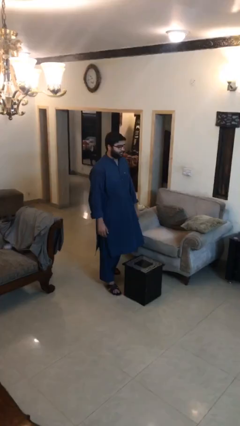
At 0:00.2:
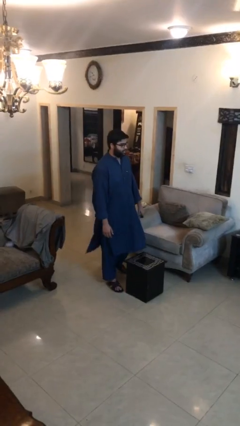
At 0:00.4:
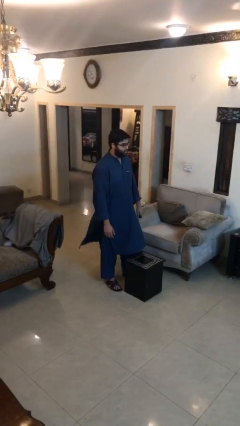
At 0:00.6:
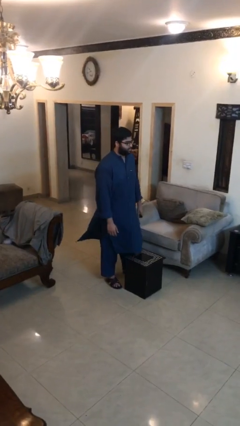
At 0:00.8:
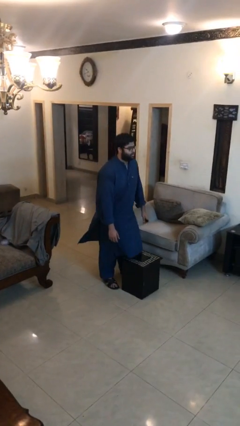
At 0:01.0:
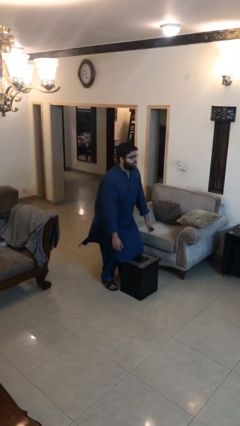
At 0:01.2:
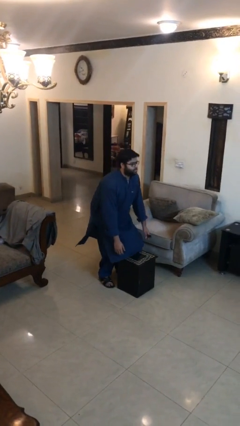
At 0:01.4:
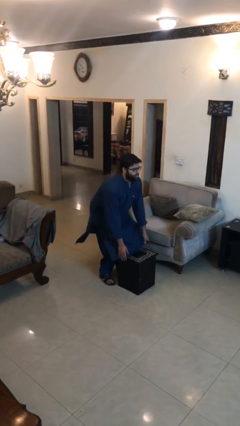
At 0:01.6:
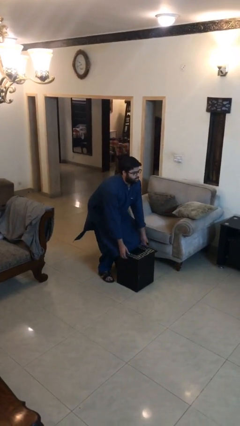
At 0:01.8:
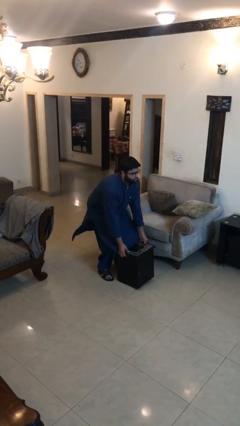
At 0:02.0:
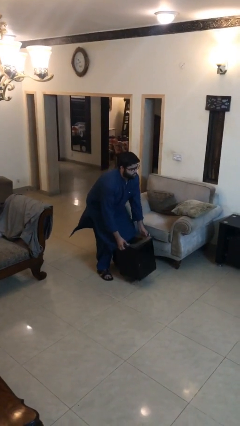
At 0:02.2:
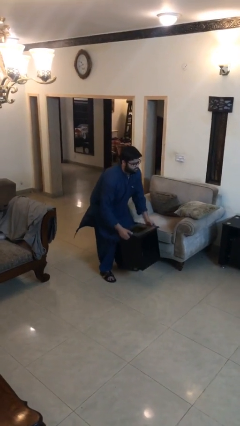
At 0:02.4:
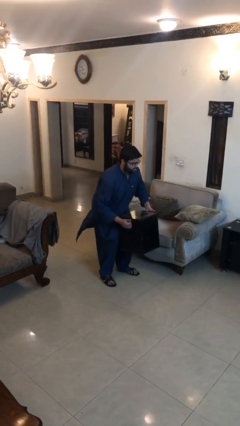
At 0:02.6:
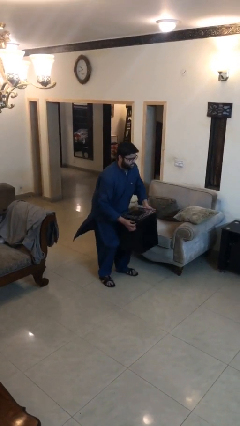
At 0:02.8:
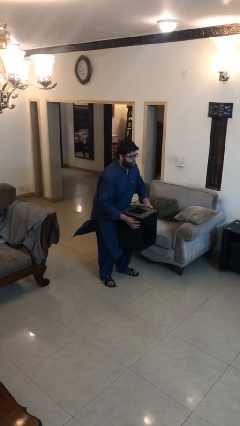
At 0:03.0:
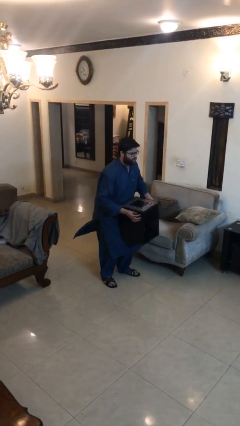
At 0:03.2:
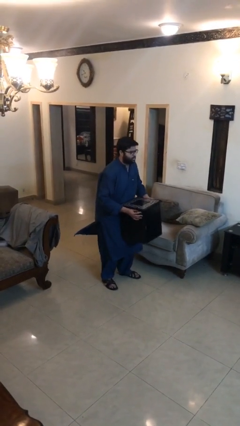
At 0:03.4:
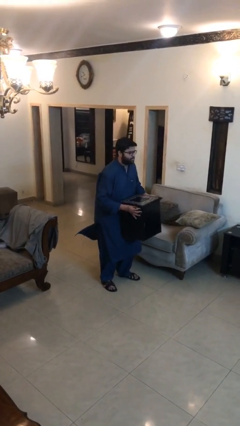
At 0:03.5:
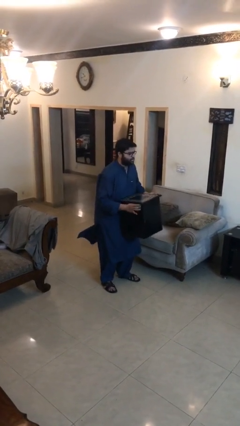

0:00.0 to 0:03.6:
person picks up object from floor

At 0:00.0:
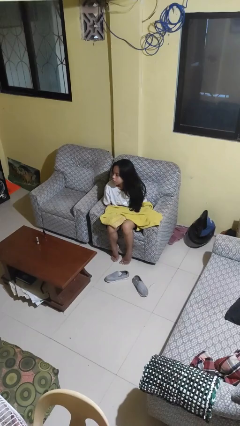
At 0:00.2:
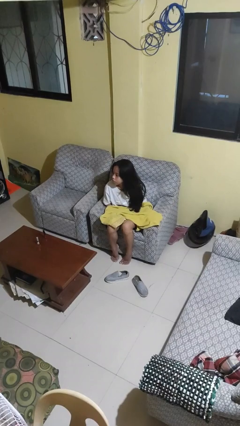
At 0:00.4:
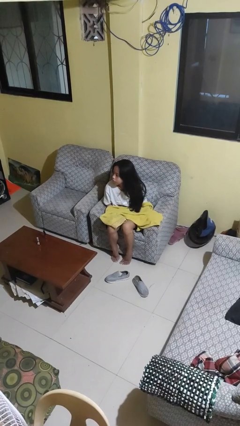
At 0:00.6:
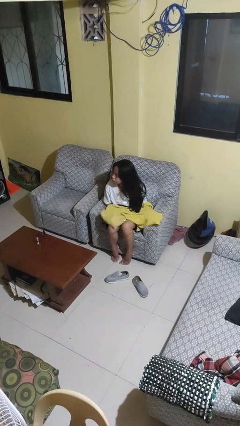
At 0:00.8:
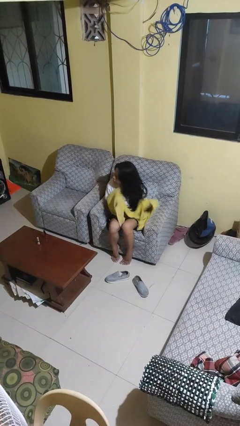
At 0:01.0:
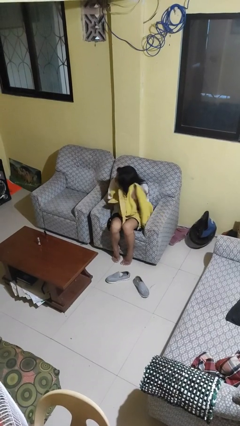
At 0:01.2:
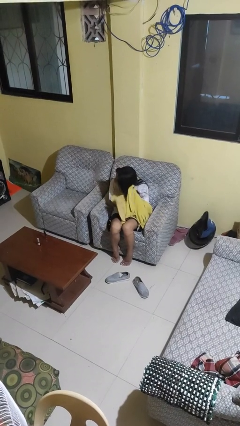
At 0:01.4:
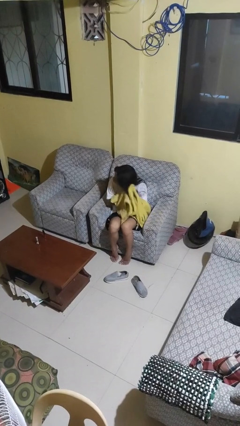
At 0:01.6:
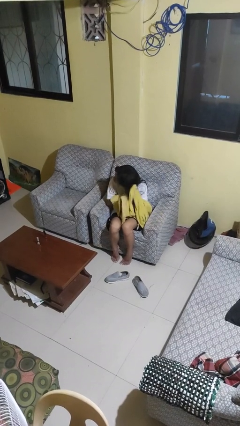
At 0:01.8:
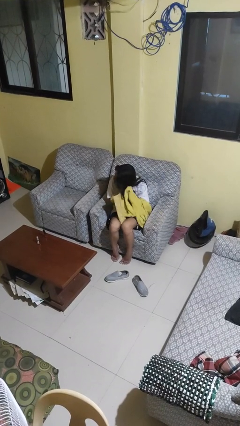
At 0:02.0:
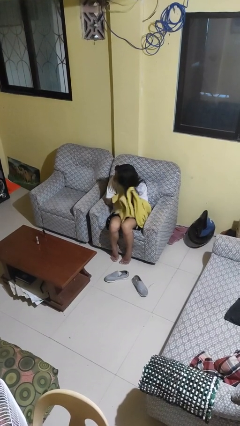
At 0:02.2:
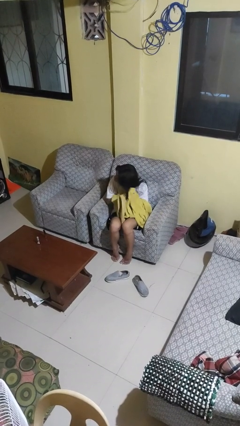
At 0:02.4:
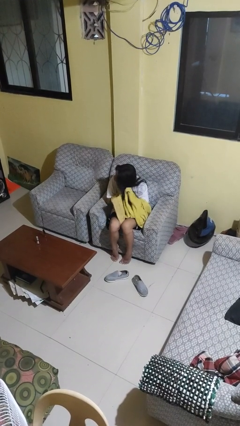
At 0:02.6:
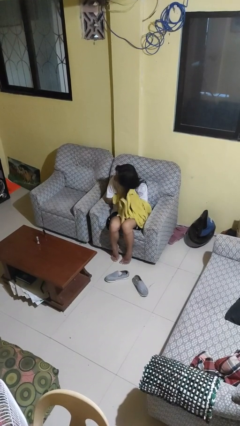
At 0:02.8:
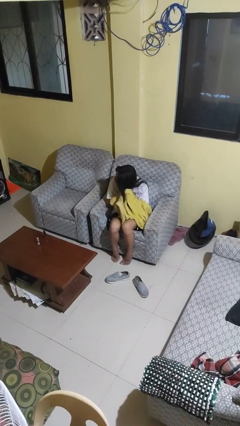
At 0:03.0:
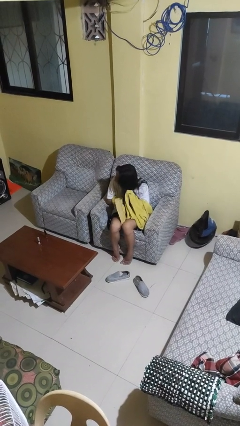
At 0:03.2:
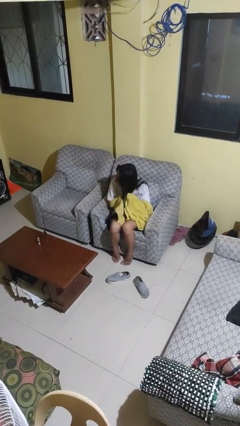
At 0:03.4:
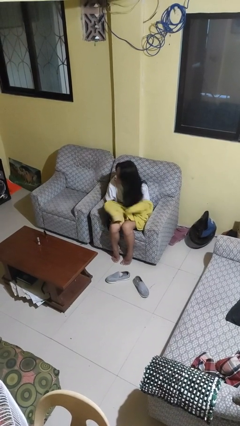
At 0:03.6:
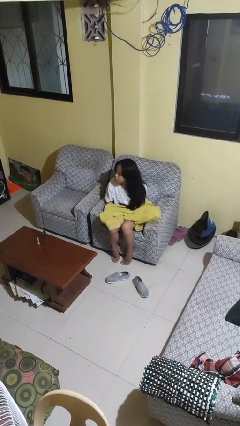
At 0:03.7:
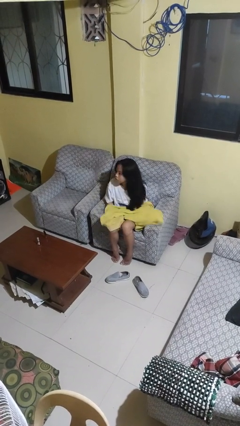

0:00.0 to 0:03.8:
person dries hair with towel

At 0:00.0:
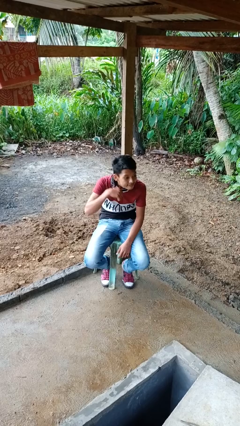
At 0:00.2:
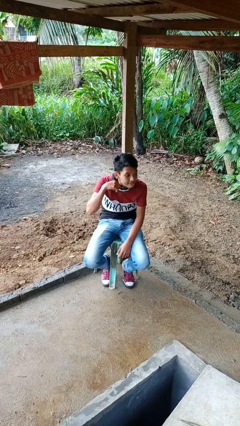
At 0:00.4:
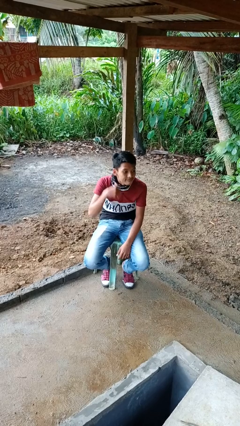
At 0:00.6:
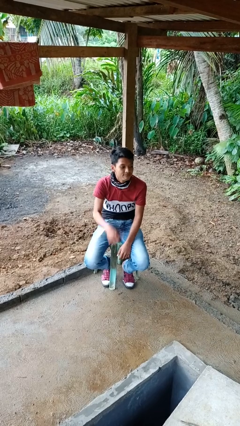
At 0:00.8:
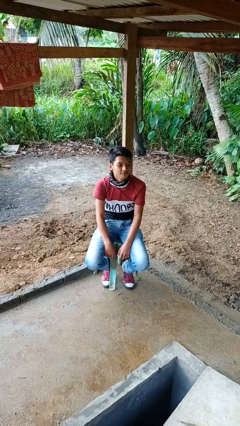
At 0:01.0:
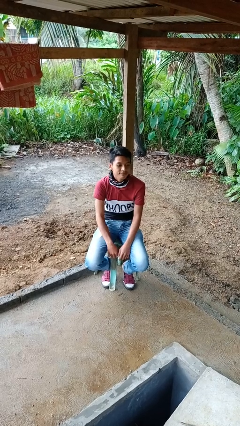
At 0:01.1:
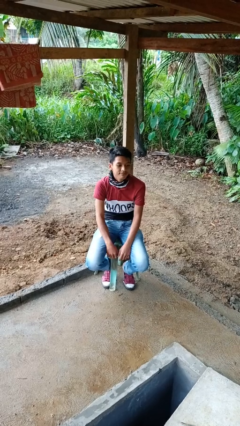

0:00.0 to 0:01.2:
person gestures cut

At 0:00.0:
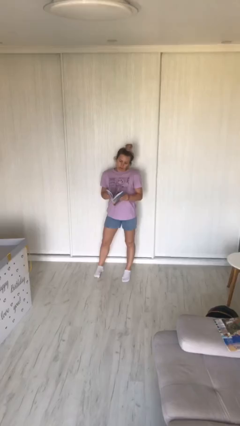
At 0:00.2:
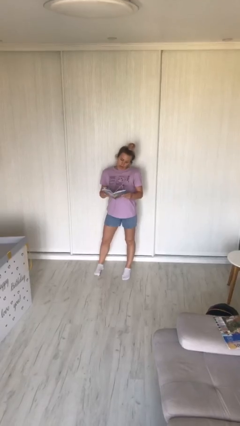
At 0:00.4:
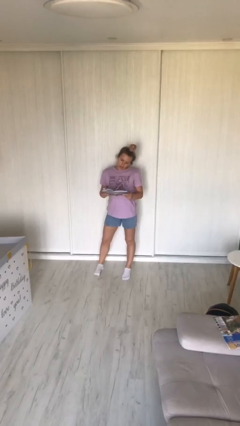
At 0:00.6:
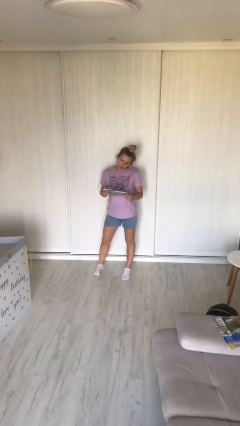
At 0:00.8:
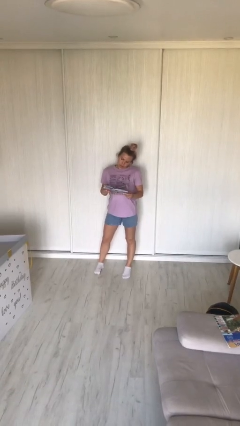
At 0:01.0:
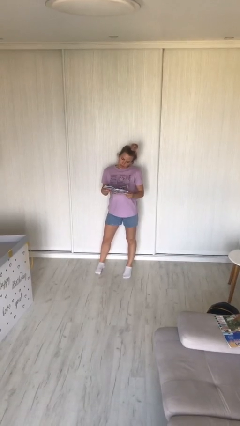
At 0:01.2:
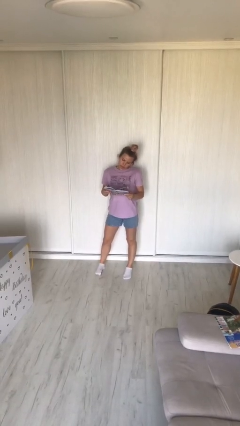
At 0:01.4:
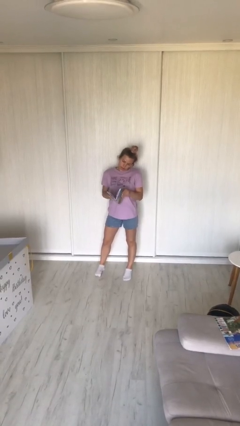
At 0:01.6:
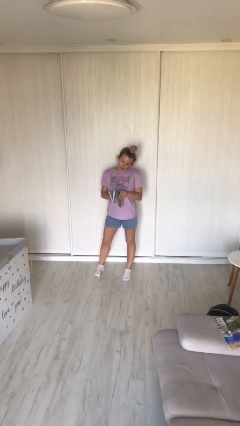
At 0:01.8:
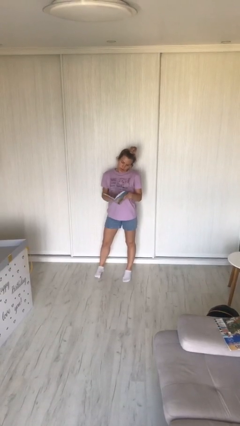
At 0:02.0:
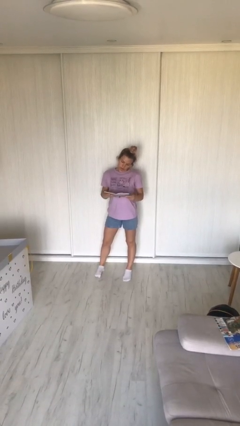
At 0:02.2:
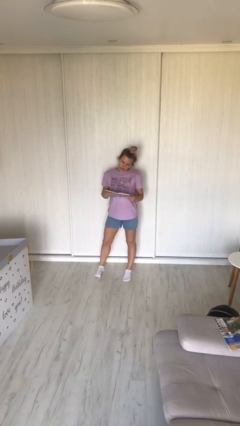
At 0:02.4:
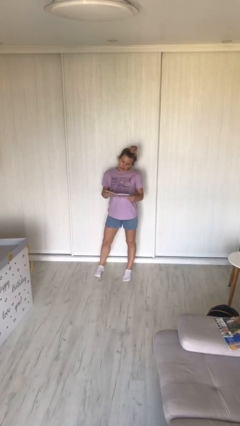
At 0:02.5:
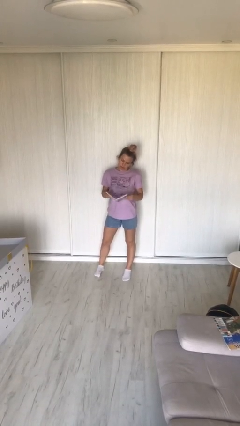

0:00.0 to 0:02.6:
person reads book

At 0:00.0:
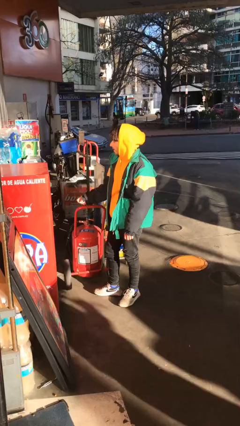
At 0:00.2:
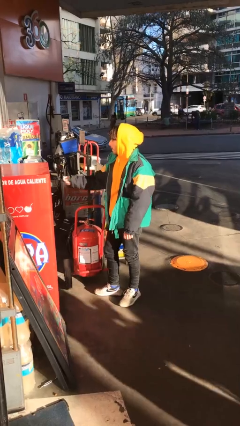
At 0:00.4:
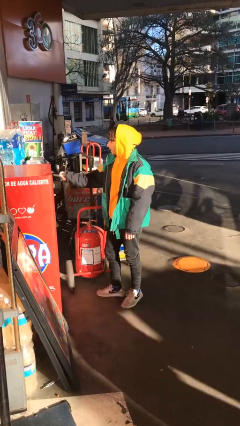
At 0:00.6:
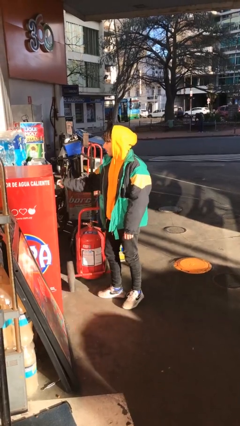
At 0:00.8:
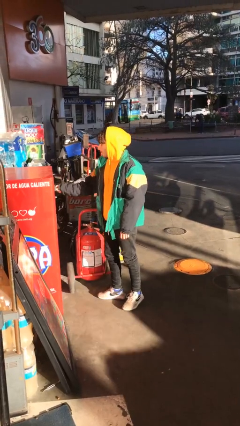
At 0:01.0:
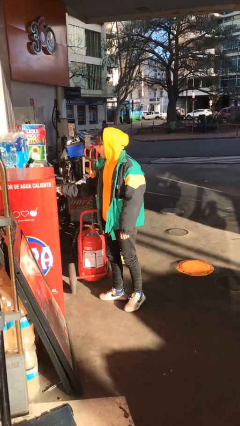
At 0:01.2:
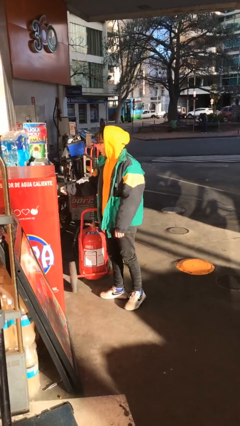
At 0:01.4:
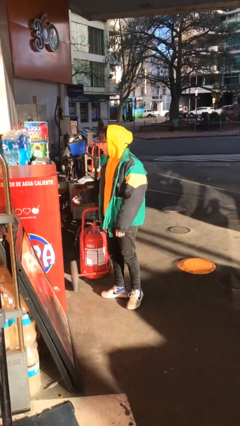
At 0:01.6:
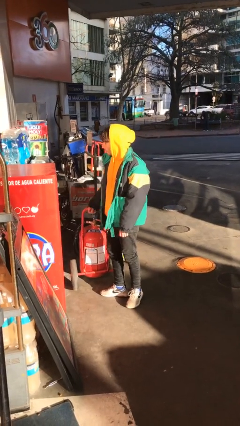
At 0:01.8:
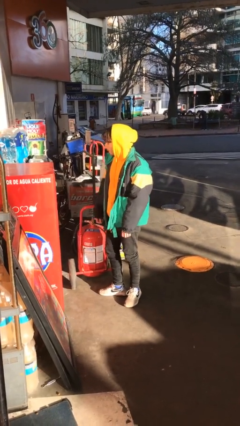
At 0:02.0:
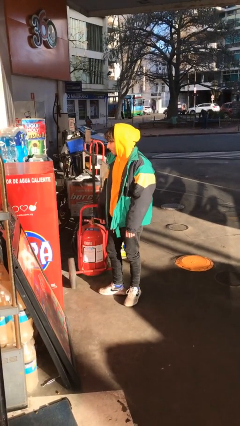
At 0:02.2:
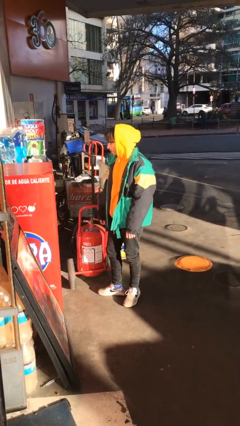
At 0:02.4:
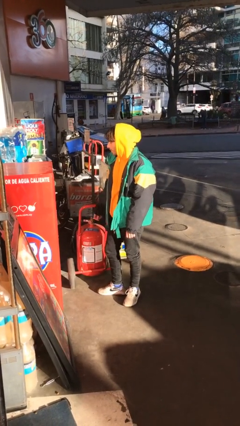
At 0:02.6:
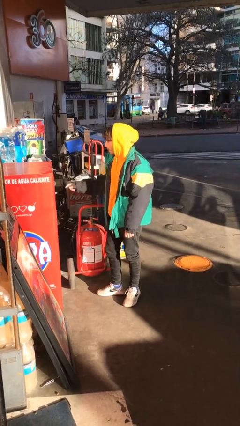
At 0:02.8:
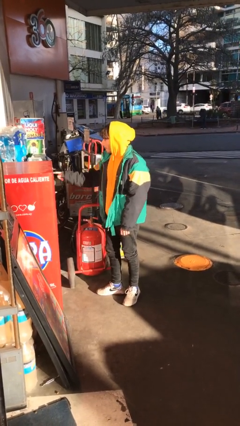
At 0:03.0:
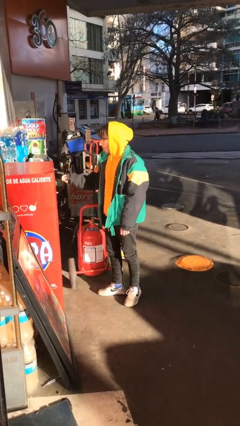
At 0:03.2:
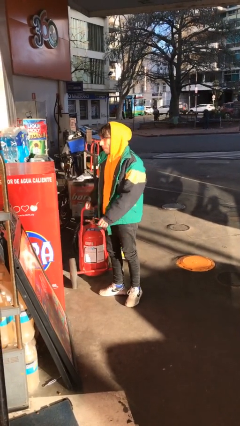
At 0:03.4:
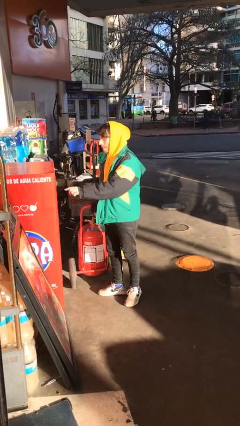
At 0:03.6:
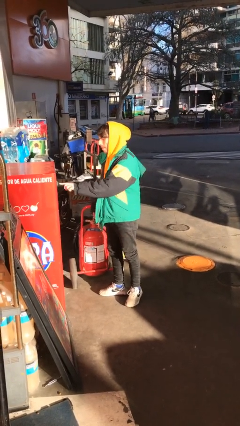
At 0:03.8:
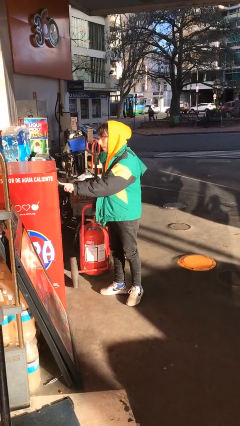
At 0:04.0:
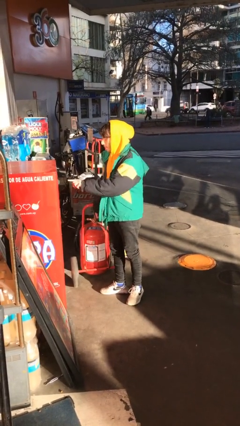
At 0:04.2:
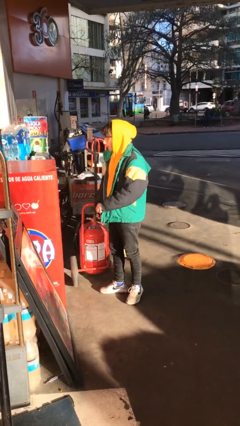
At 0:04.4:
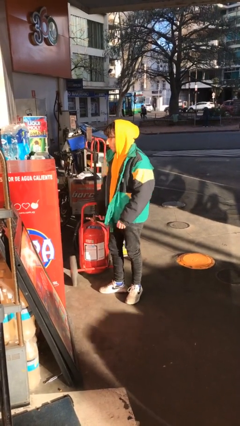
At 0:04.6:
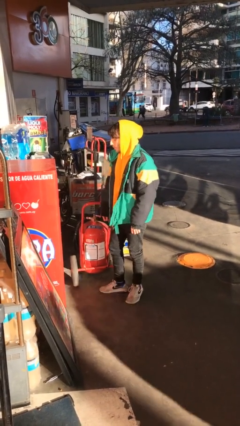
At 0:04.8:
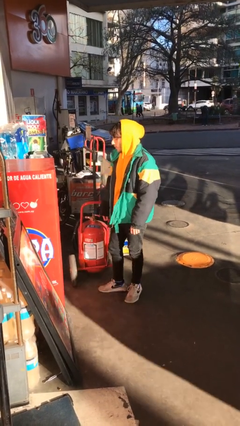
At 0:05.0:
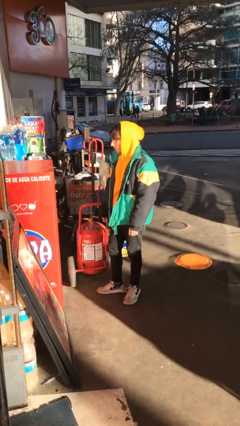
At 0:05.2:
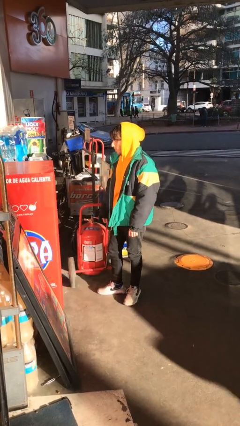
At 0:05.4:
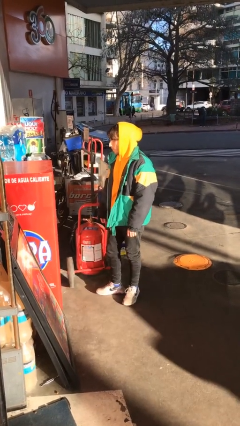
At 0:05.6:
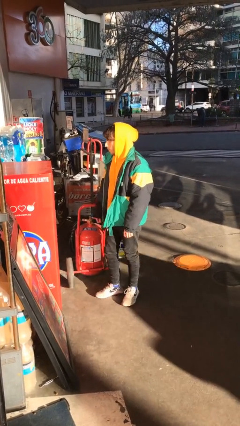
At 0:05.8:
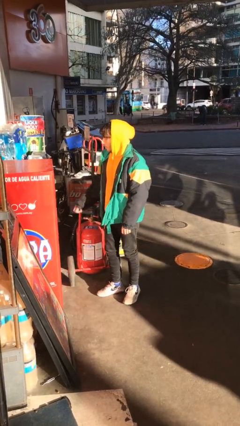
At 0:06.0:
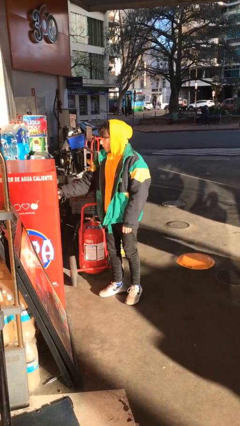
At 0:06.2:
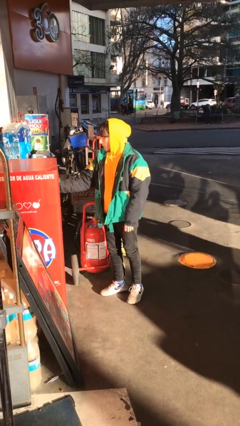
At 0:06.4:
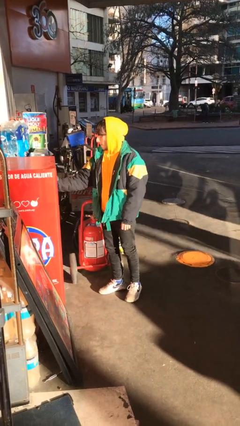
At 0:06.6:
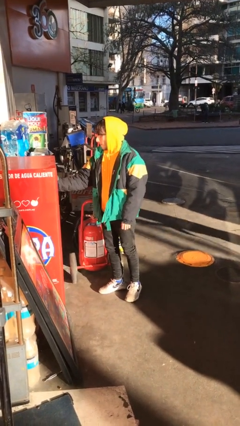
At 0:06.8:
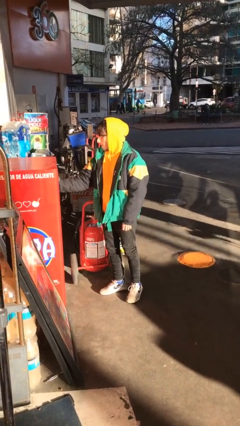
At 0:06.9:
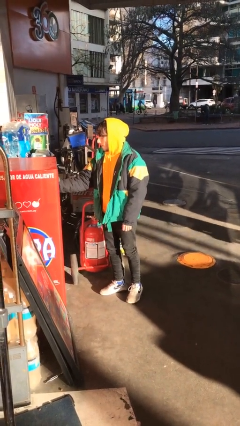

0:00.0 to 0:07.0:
person purchases from machine
